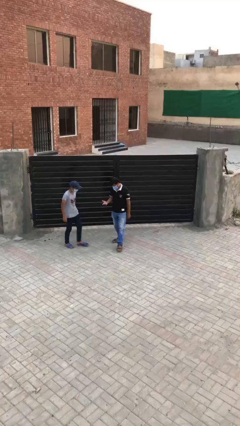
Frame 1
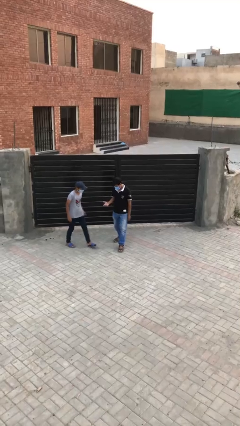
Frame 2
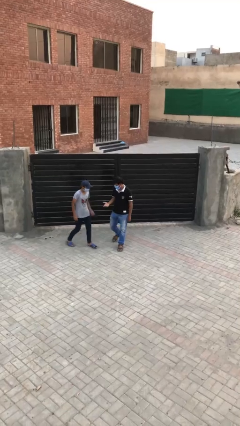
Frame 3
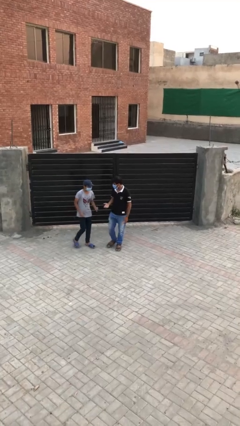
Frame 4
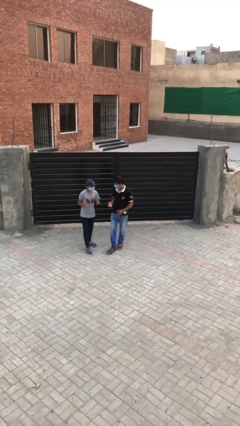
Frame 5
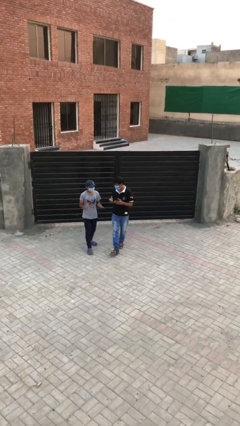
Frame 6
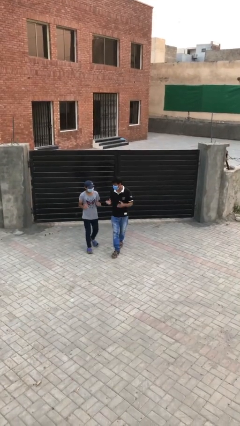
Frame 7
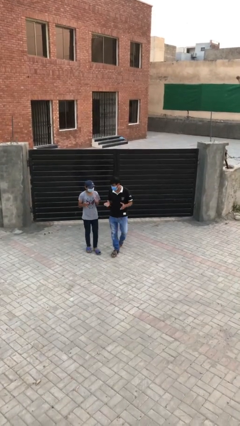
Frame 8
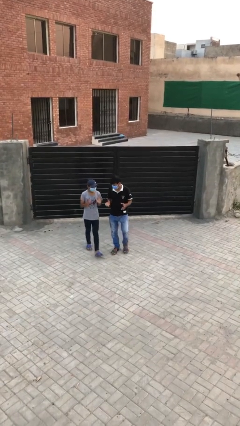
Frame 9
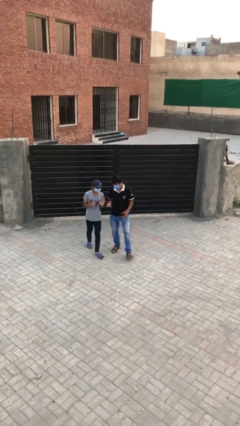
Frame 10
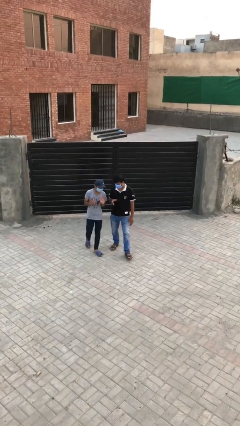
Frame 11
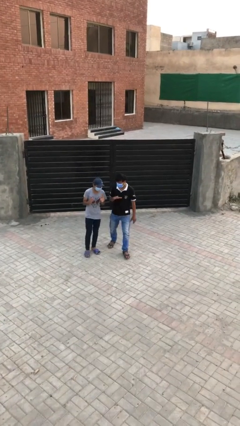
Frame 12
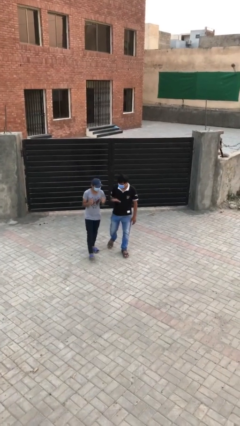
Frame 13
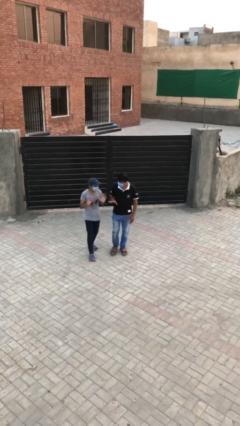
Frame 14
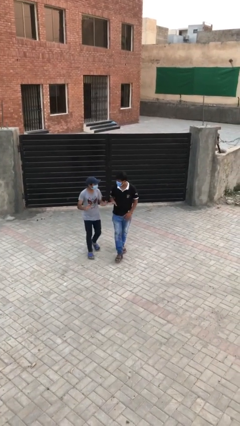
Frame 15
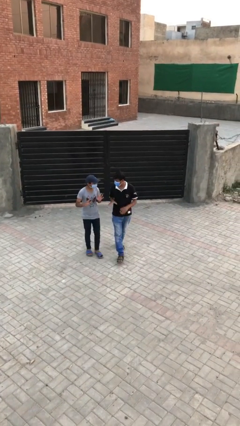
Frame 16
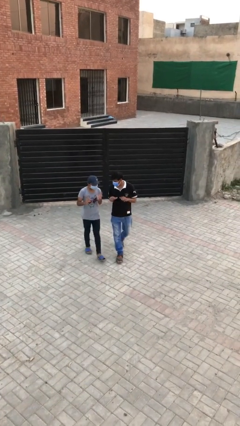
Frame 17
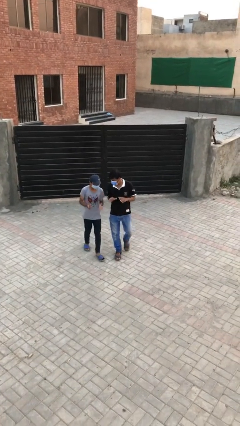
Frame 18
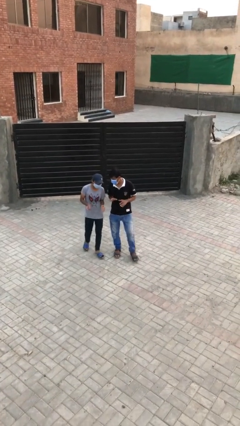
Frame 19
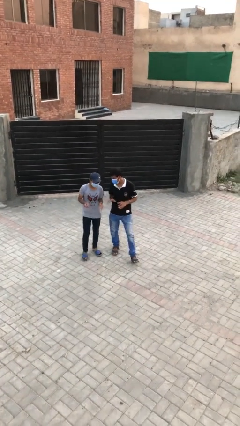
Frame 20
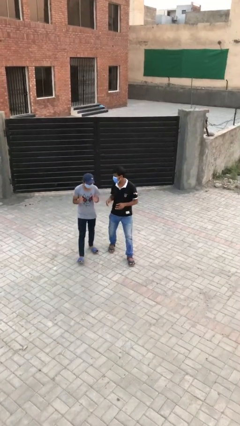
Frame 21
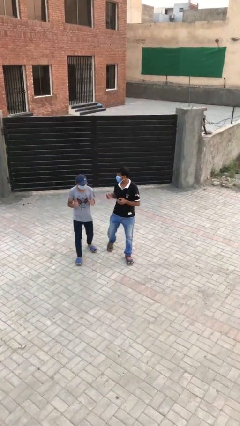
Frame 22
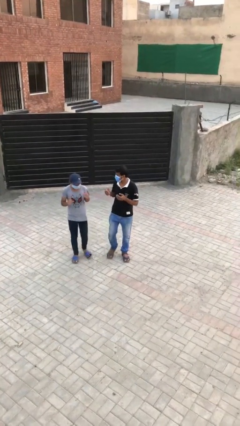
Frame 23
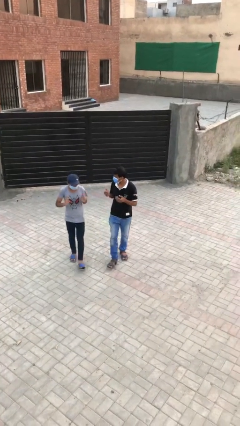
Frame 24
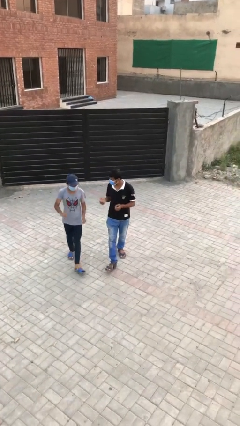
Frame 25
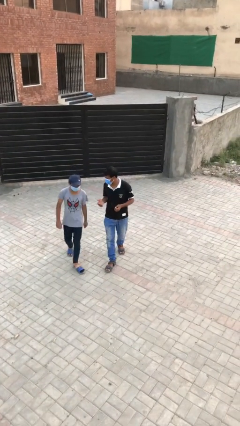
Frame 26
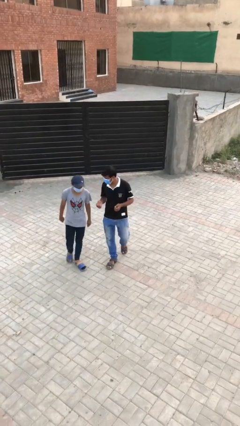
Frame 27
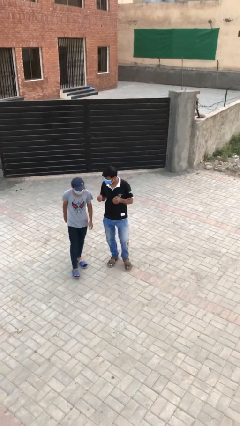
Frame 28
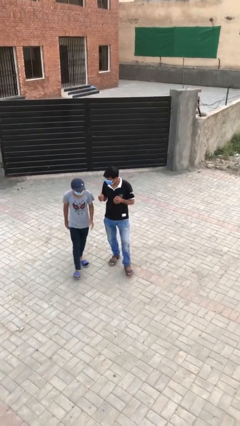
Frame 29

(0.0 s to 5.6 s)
person talks to person

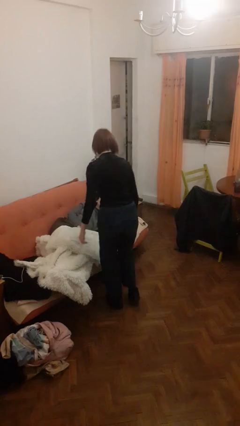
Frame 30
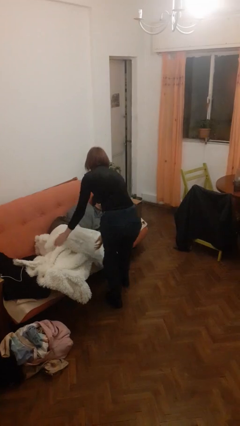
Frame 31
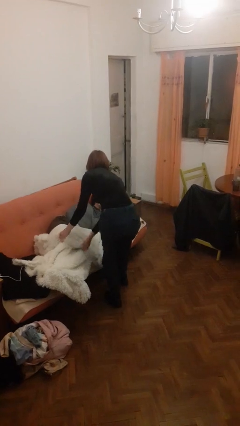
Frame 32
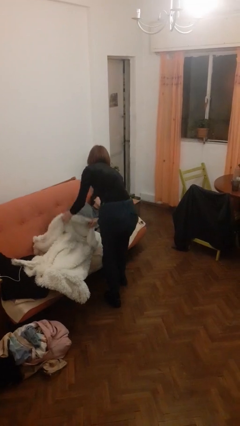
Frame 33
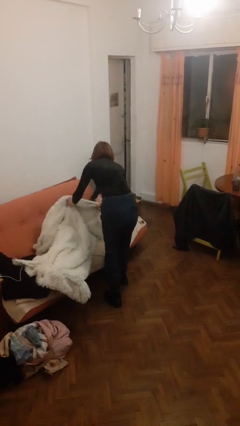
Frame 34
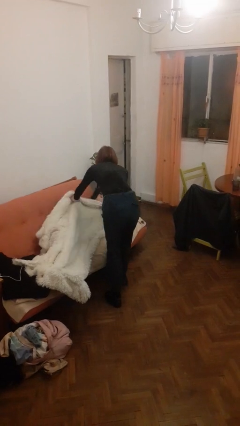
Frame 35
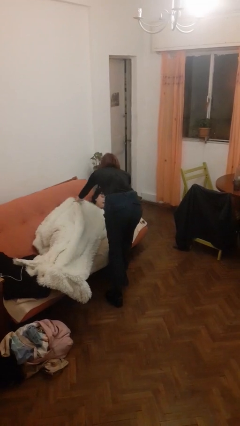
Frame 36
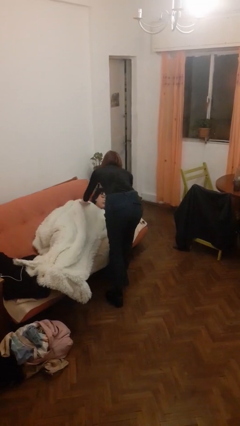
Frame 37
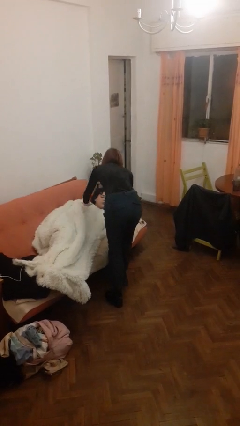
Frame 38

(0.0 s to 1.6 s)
person covers friend with blanket

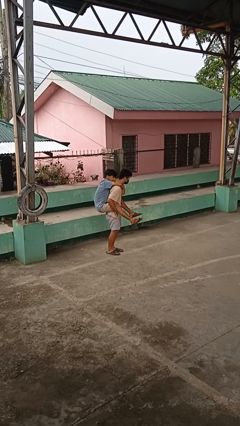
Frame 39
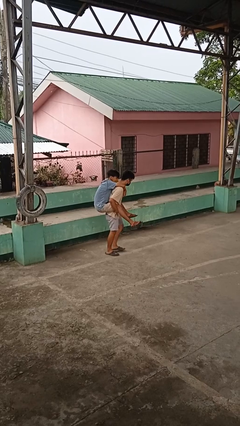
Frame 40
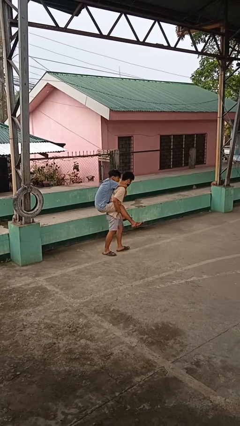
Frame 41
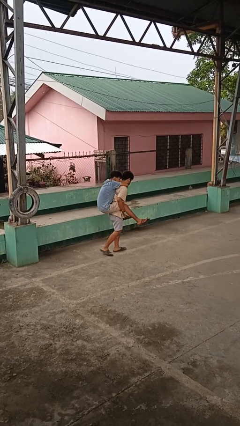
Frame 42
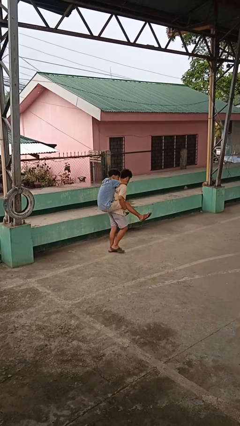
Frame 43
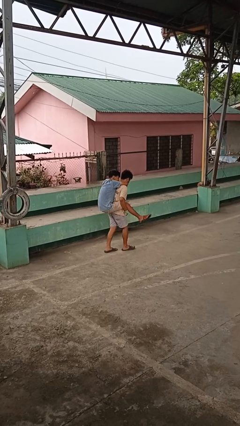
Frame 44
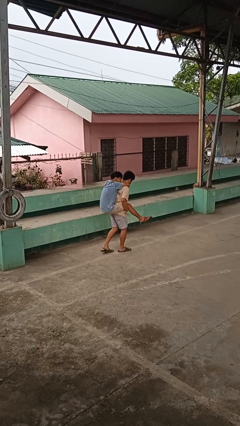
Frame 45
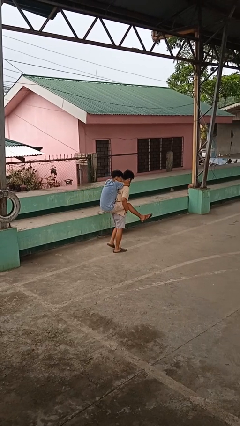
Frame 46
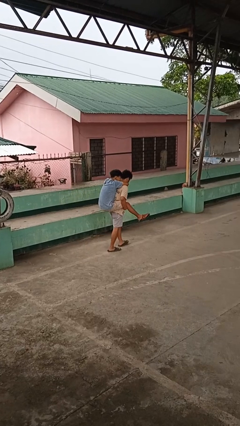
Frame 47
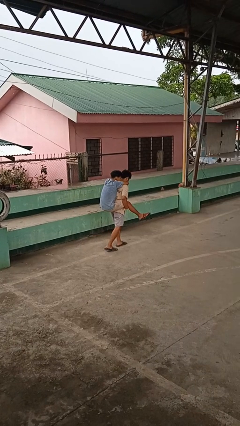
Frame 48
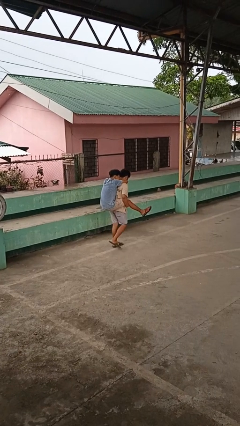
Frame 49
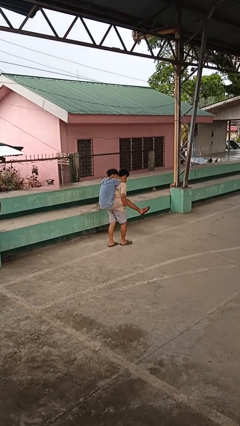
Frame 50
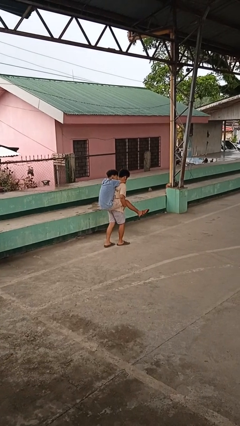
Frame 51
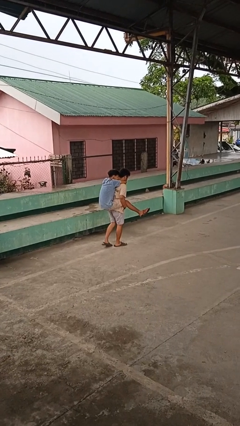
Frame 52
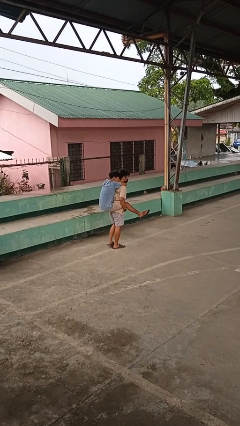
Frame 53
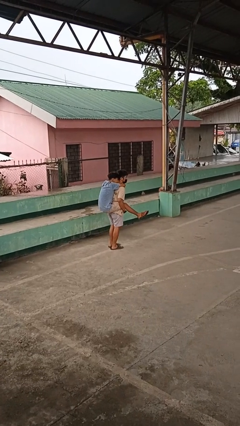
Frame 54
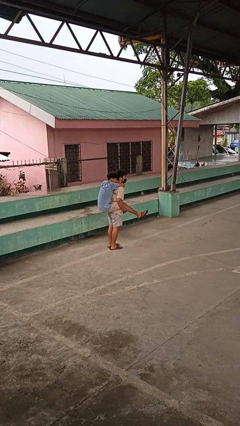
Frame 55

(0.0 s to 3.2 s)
person carries person on back

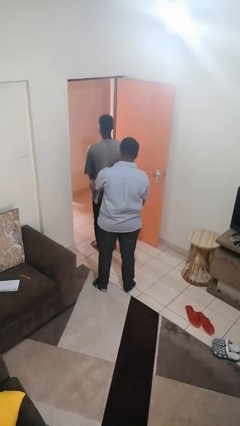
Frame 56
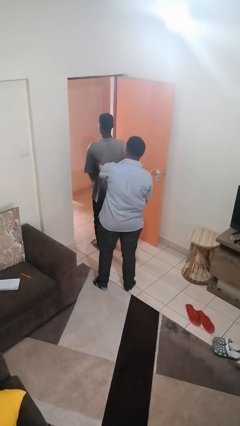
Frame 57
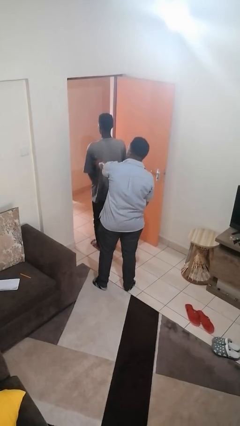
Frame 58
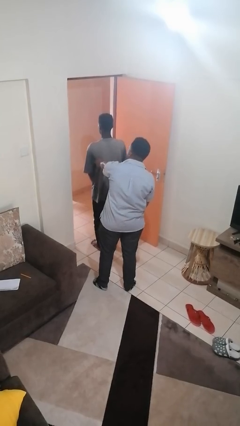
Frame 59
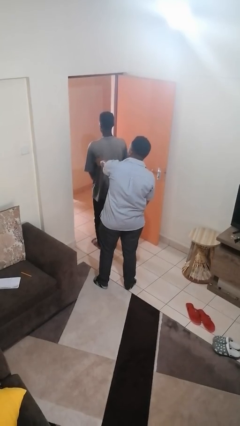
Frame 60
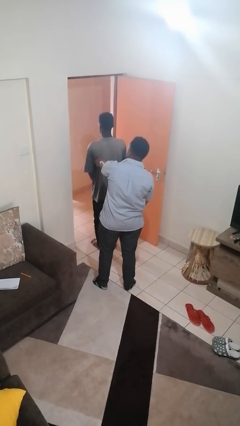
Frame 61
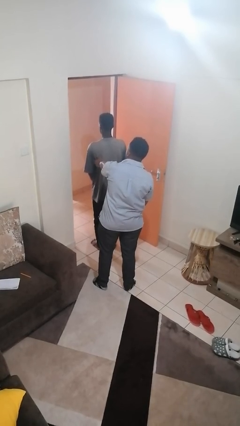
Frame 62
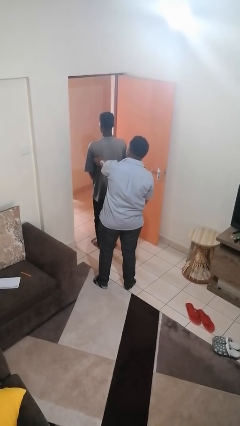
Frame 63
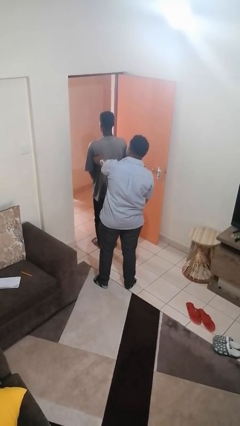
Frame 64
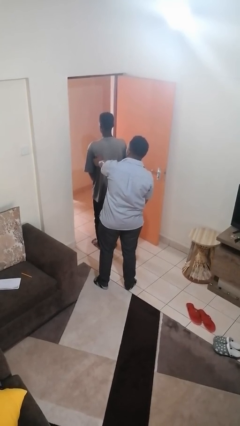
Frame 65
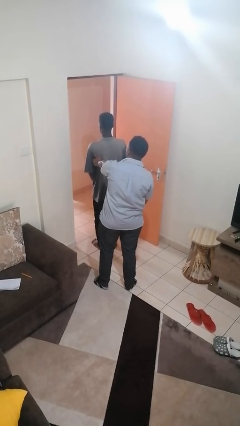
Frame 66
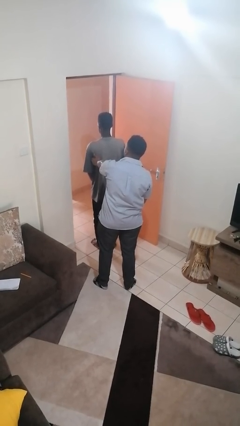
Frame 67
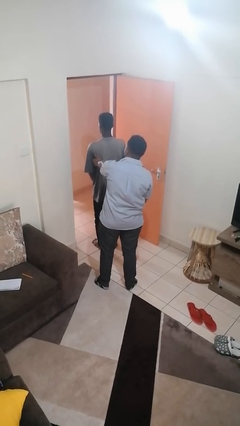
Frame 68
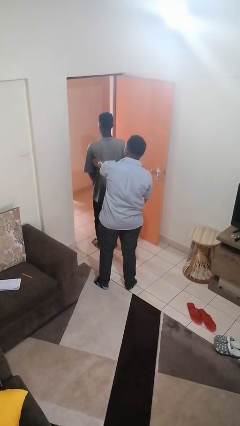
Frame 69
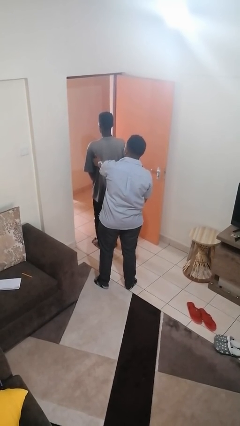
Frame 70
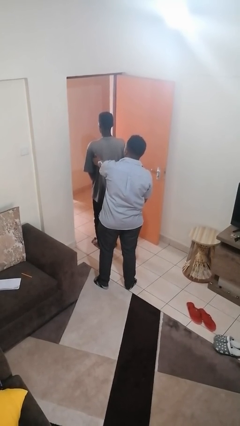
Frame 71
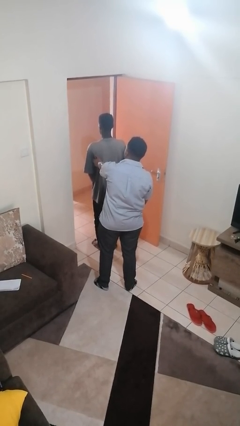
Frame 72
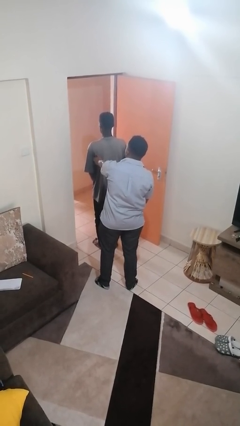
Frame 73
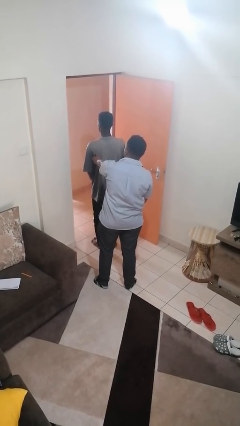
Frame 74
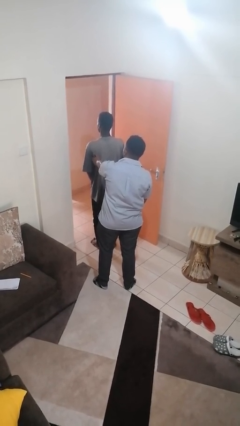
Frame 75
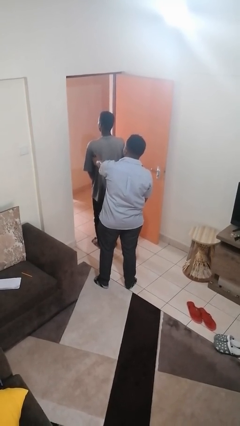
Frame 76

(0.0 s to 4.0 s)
person touches back of person

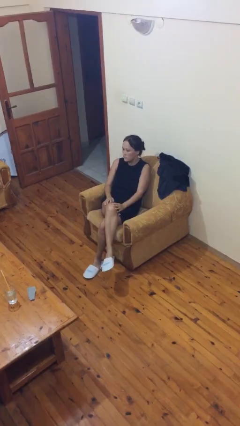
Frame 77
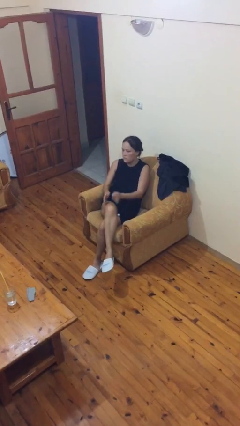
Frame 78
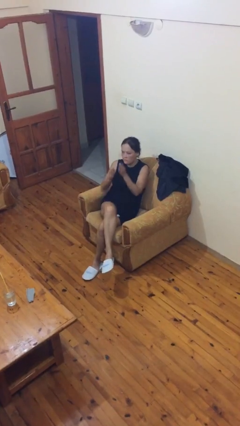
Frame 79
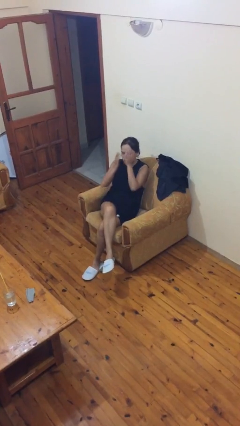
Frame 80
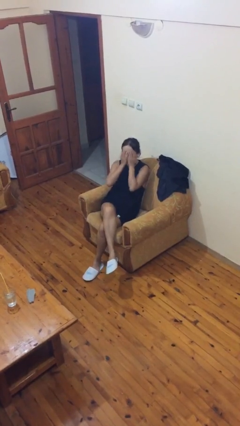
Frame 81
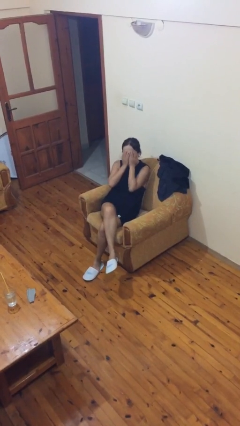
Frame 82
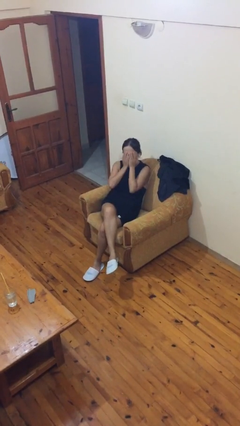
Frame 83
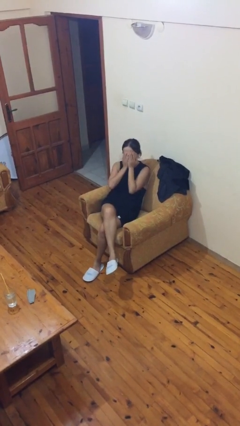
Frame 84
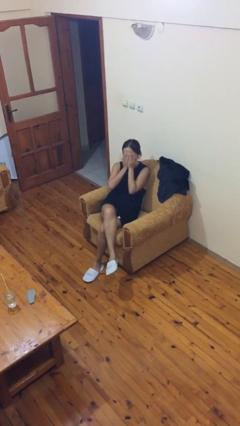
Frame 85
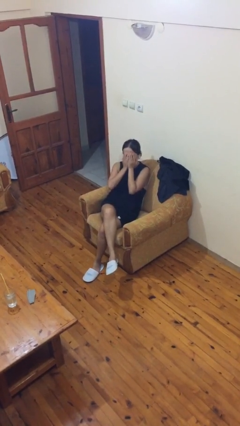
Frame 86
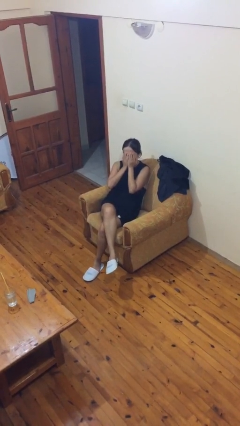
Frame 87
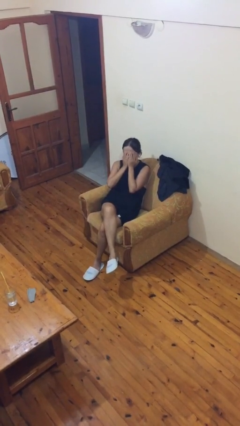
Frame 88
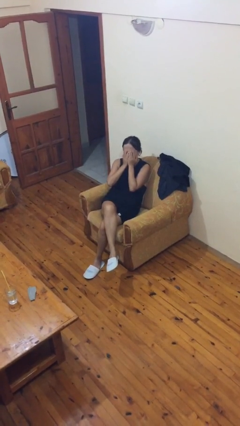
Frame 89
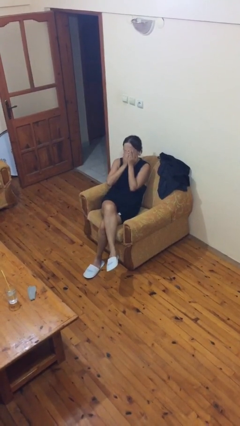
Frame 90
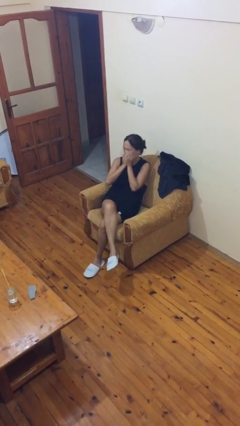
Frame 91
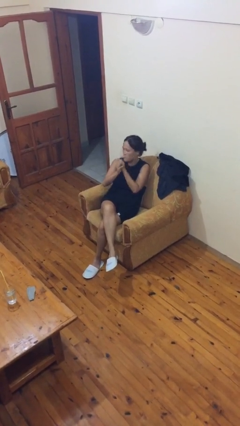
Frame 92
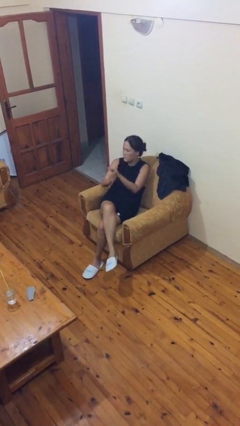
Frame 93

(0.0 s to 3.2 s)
person covers face with hands
